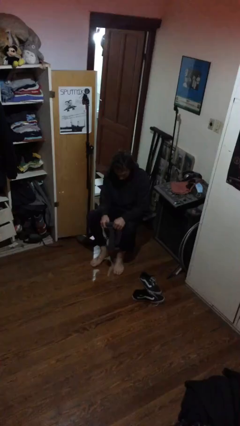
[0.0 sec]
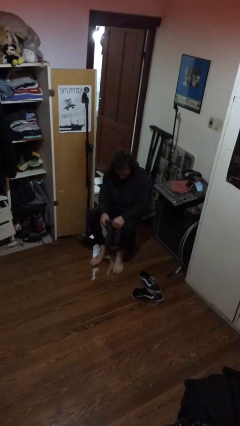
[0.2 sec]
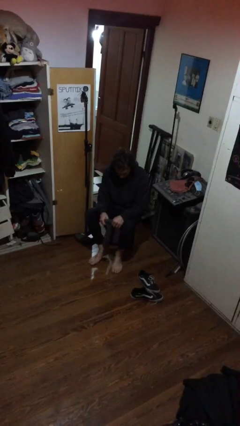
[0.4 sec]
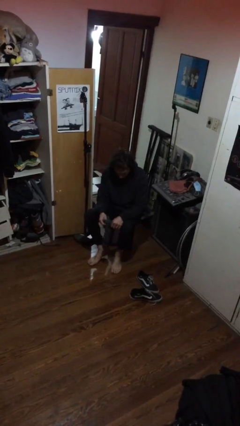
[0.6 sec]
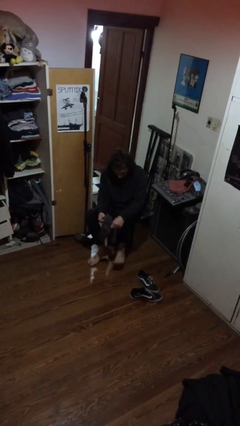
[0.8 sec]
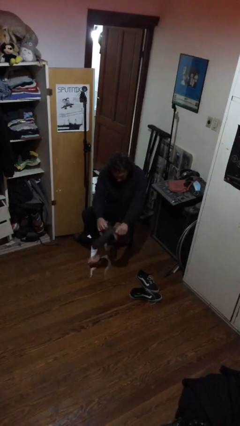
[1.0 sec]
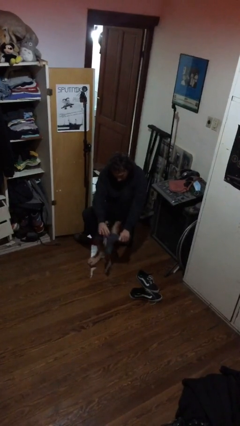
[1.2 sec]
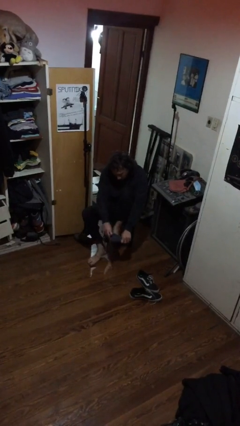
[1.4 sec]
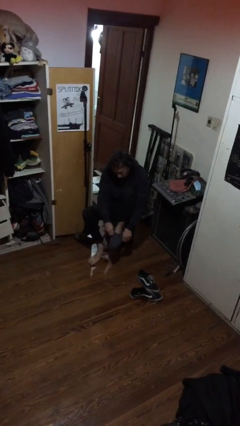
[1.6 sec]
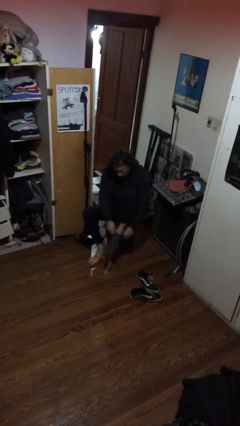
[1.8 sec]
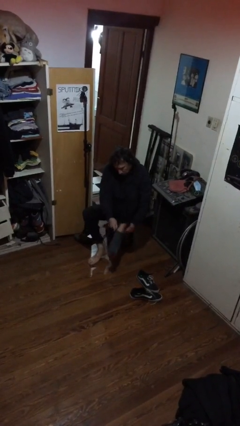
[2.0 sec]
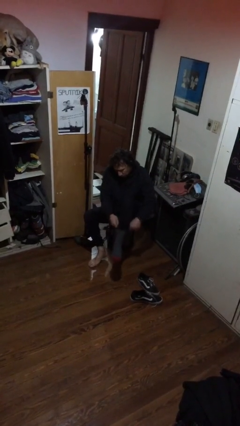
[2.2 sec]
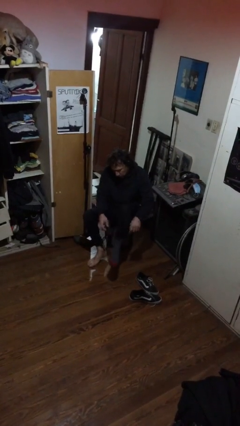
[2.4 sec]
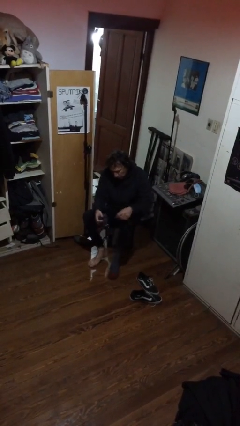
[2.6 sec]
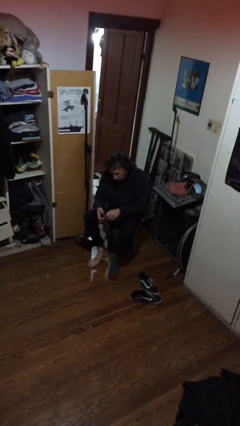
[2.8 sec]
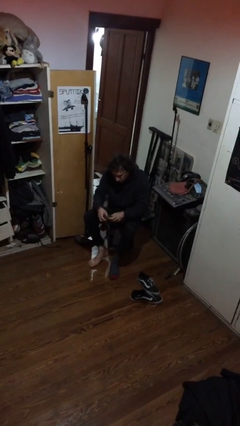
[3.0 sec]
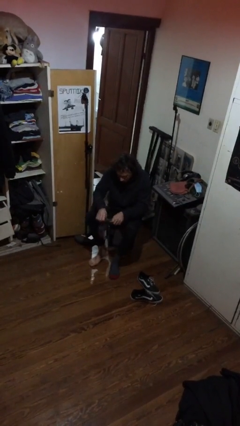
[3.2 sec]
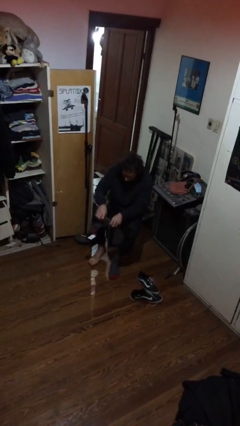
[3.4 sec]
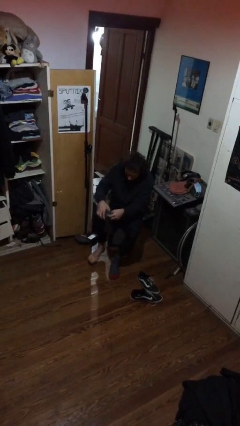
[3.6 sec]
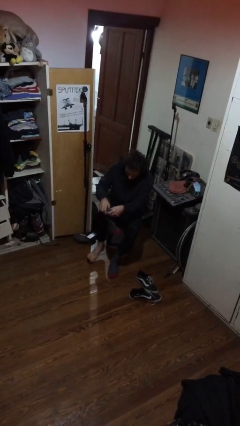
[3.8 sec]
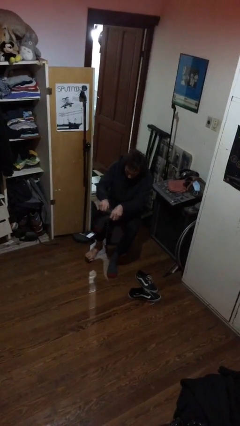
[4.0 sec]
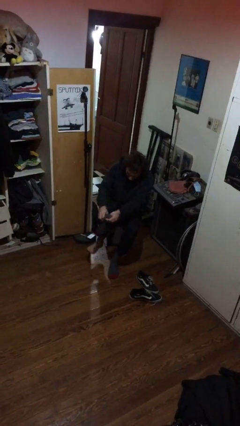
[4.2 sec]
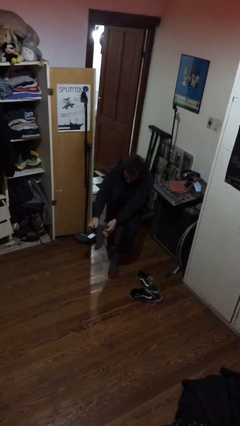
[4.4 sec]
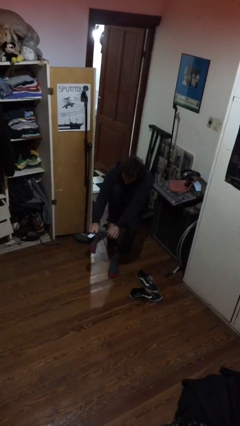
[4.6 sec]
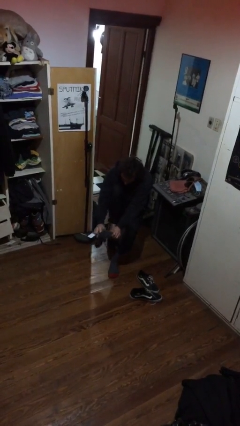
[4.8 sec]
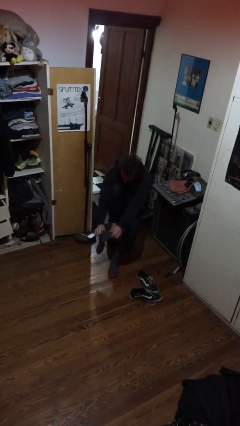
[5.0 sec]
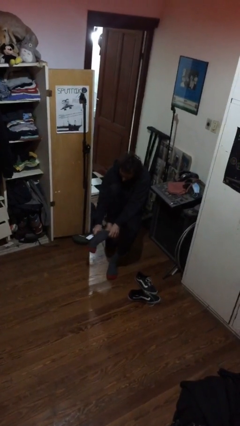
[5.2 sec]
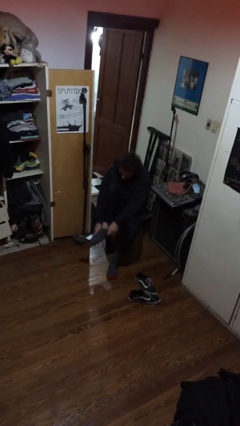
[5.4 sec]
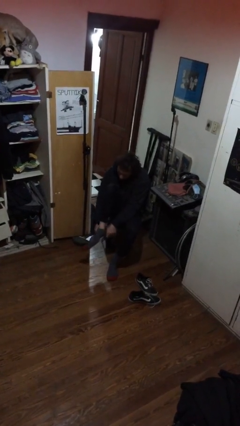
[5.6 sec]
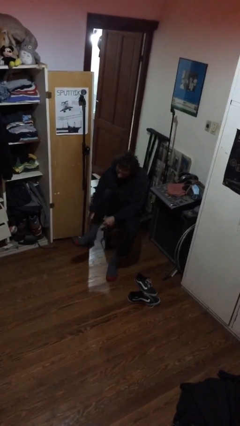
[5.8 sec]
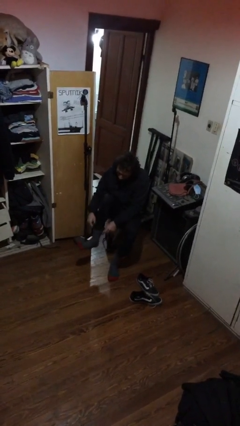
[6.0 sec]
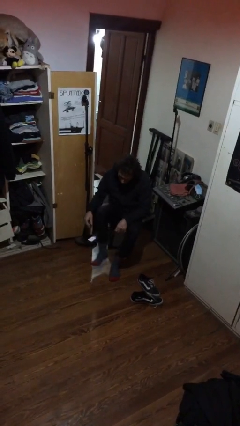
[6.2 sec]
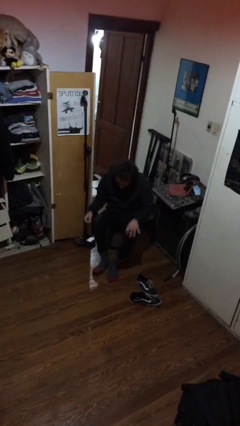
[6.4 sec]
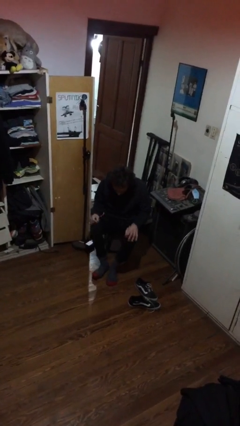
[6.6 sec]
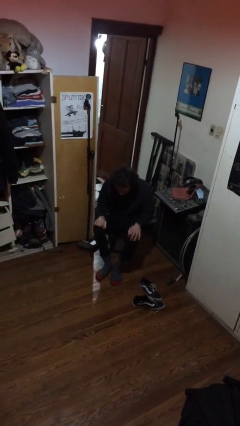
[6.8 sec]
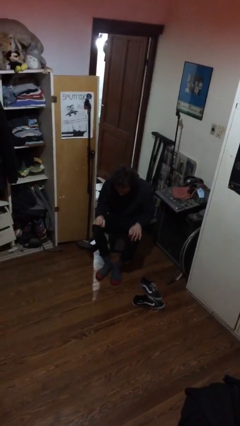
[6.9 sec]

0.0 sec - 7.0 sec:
person puts on socks

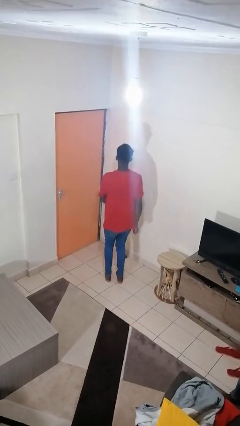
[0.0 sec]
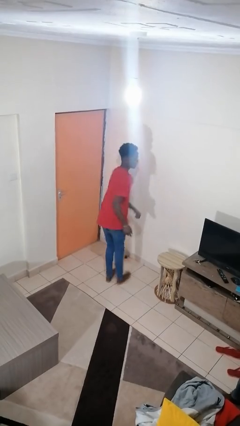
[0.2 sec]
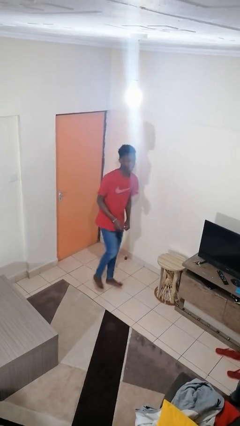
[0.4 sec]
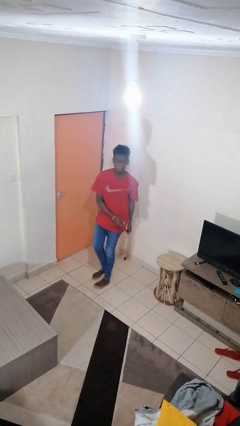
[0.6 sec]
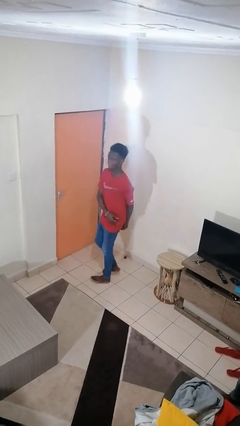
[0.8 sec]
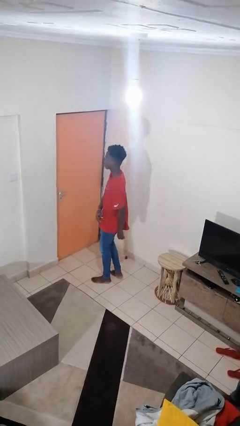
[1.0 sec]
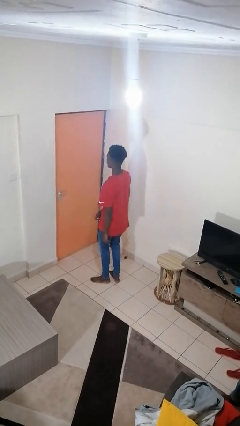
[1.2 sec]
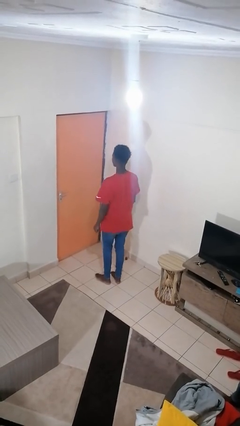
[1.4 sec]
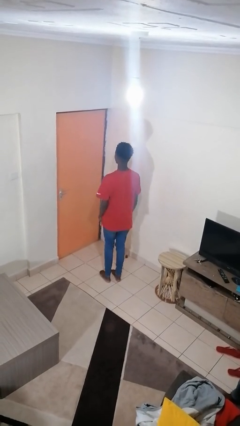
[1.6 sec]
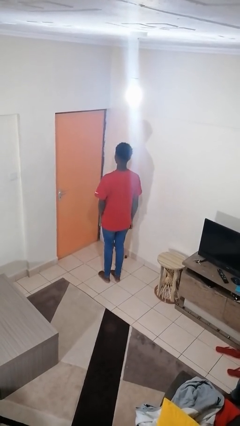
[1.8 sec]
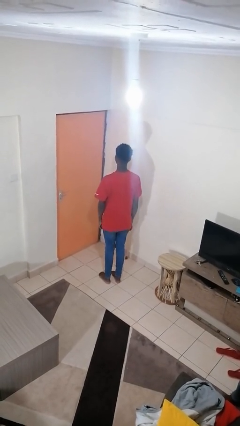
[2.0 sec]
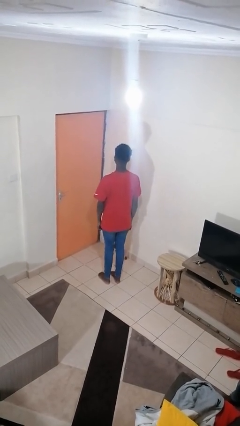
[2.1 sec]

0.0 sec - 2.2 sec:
person twirls

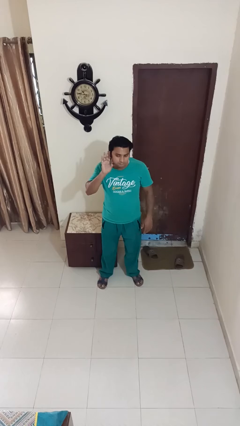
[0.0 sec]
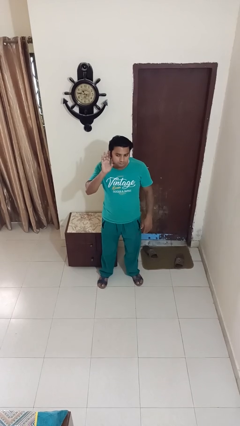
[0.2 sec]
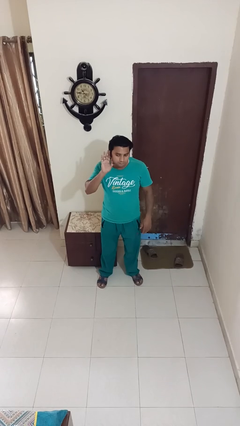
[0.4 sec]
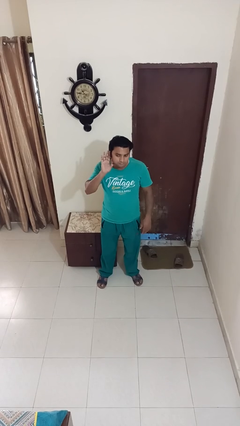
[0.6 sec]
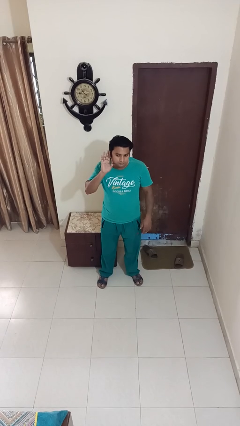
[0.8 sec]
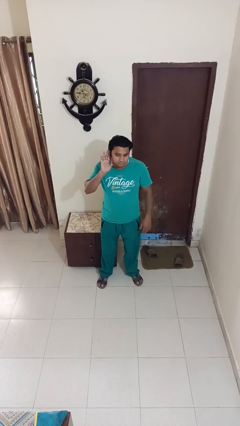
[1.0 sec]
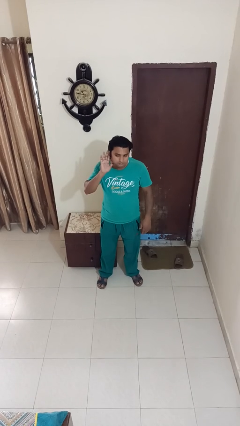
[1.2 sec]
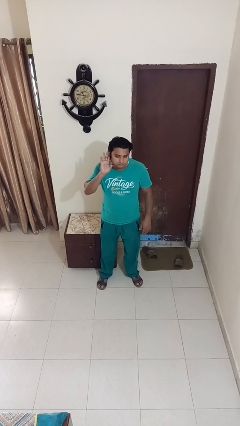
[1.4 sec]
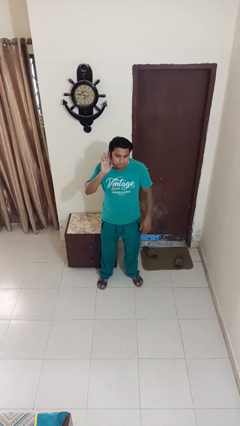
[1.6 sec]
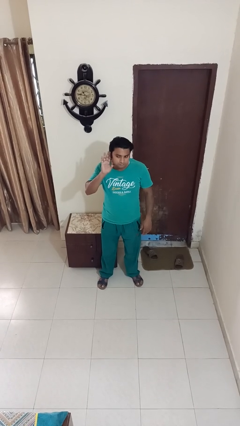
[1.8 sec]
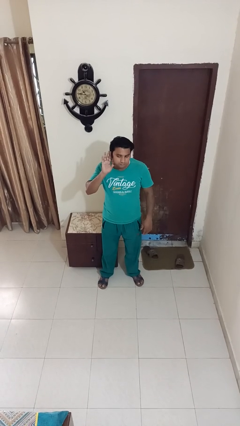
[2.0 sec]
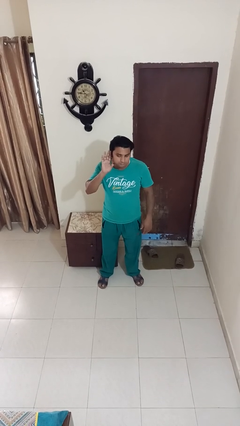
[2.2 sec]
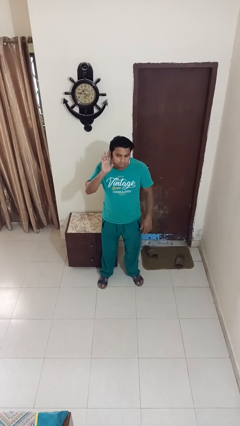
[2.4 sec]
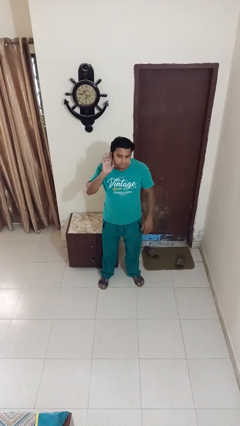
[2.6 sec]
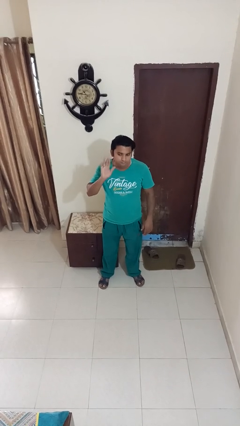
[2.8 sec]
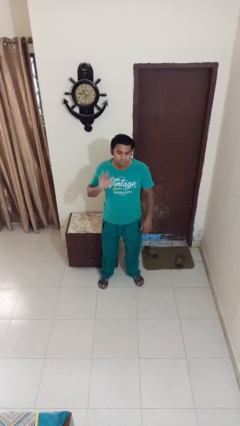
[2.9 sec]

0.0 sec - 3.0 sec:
person gestures listen closely

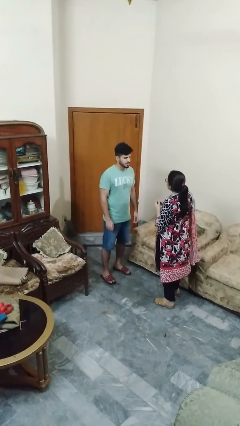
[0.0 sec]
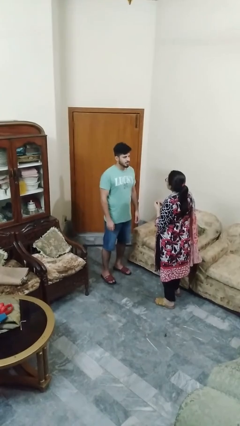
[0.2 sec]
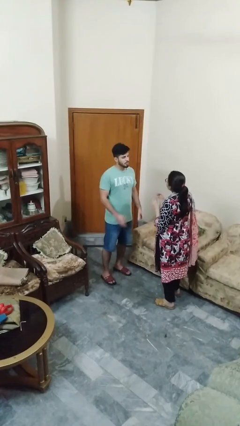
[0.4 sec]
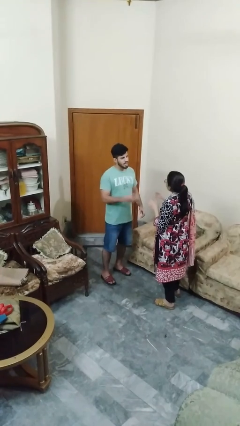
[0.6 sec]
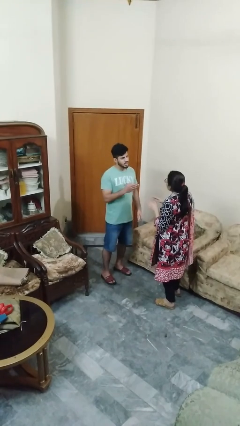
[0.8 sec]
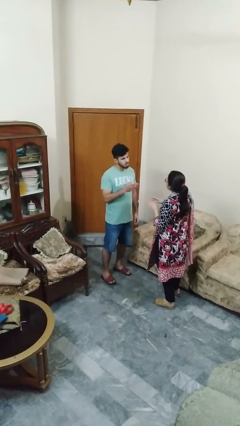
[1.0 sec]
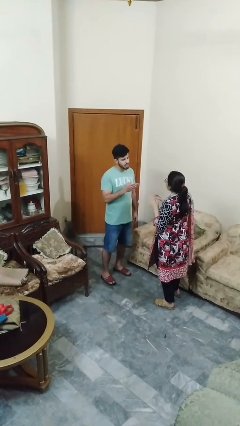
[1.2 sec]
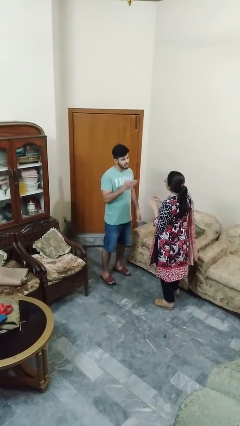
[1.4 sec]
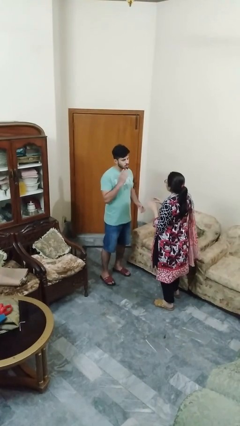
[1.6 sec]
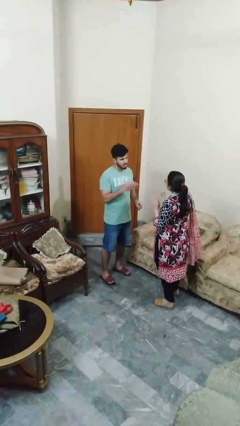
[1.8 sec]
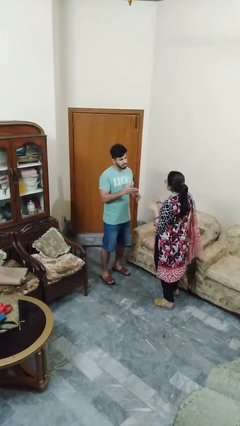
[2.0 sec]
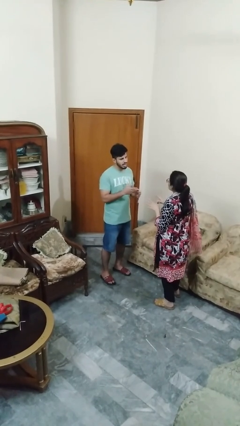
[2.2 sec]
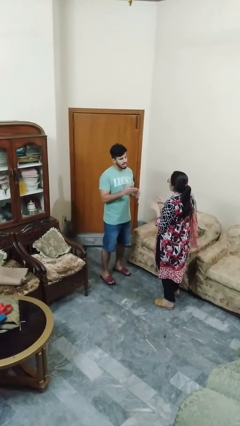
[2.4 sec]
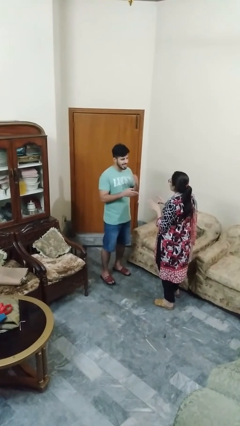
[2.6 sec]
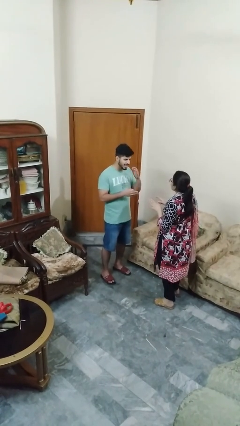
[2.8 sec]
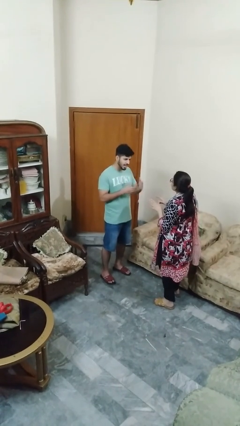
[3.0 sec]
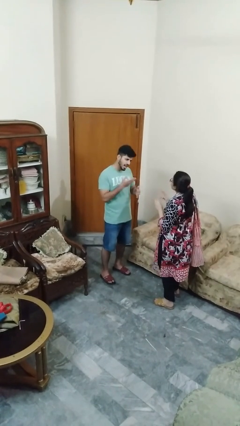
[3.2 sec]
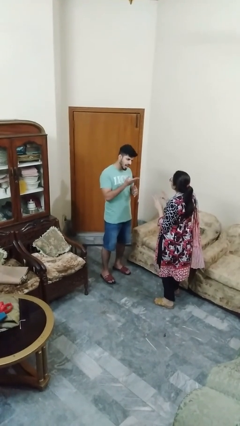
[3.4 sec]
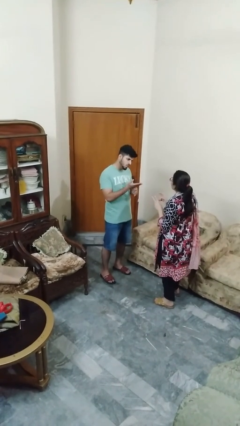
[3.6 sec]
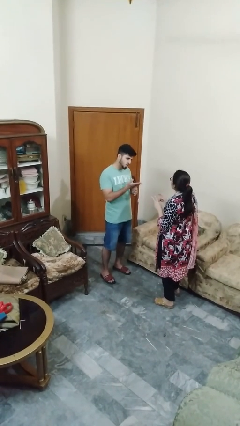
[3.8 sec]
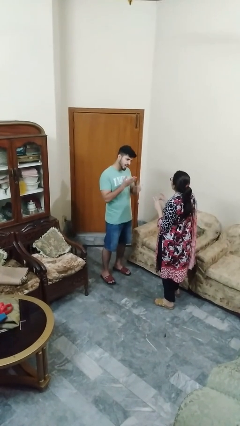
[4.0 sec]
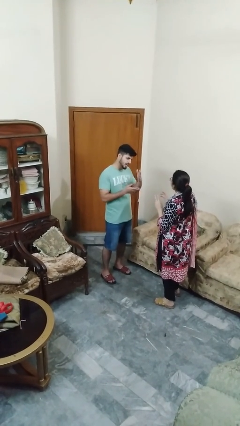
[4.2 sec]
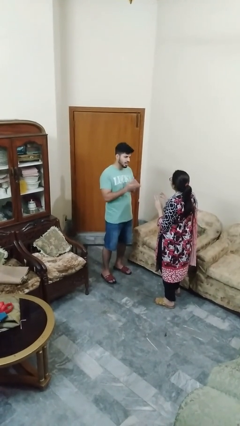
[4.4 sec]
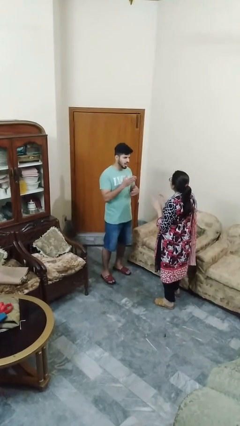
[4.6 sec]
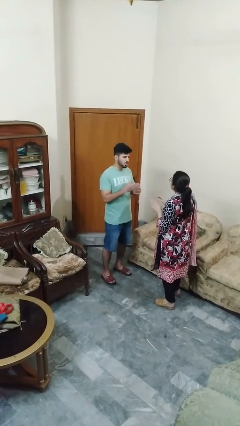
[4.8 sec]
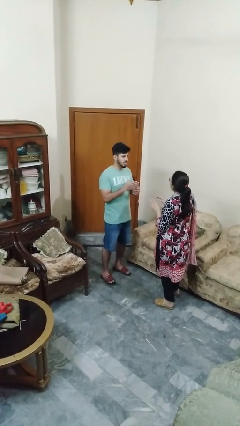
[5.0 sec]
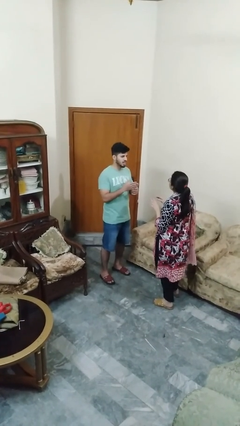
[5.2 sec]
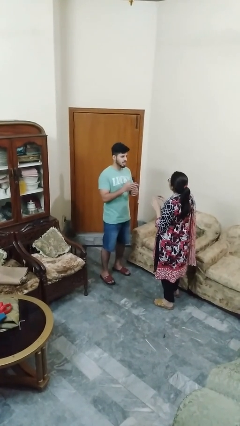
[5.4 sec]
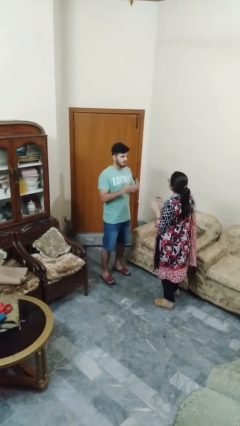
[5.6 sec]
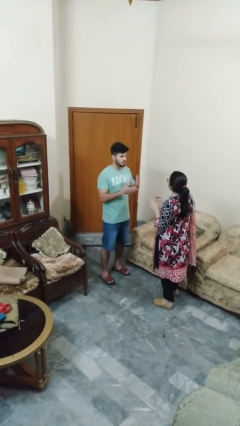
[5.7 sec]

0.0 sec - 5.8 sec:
person talks to person
